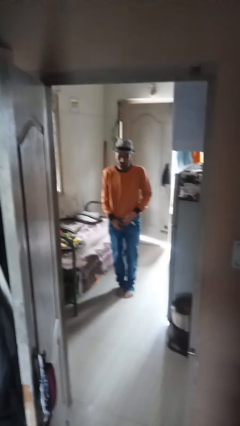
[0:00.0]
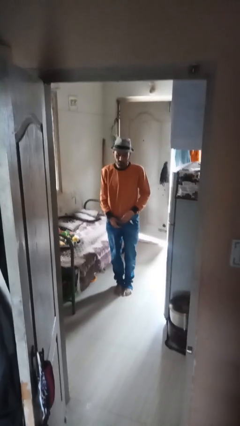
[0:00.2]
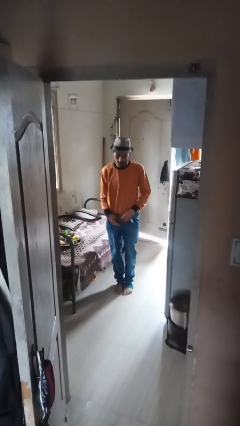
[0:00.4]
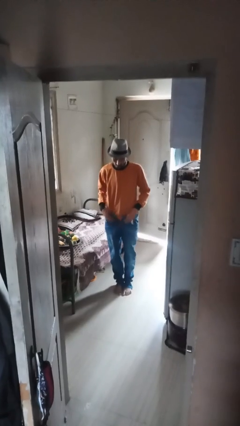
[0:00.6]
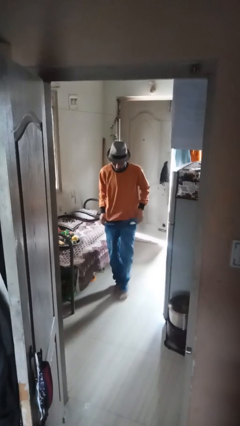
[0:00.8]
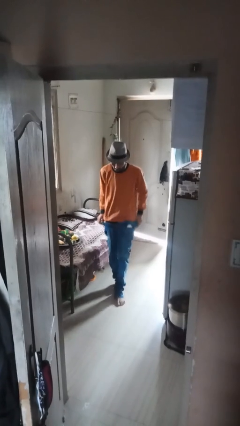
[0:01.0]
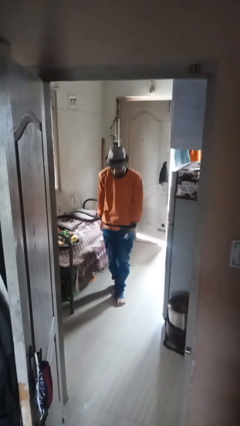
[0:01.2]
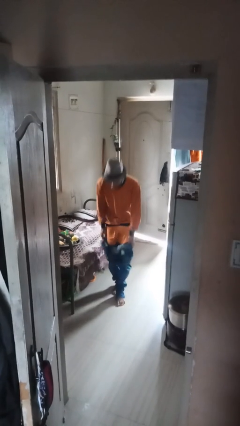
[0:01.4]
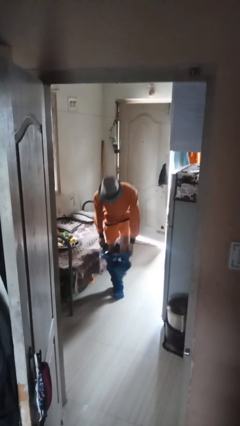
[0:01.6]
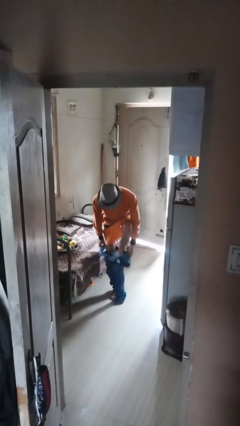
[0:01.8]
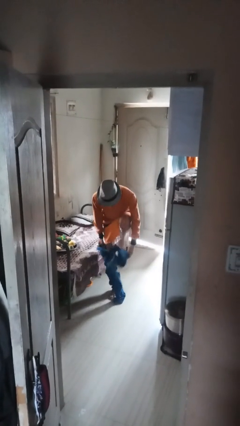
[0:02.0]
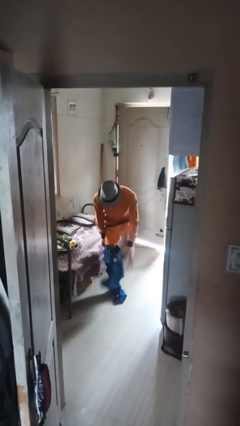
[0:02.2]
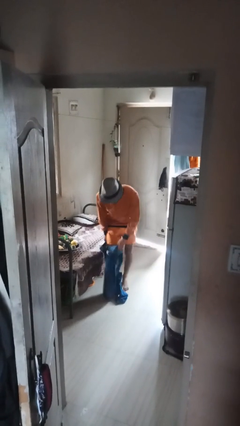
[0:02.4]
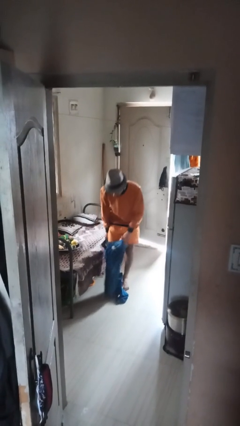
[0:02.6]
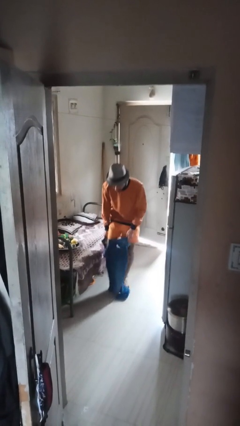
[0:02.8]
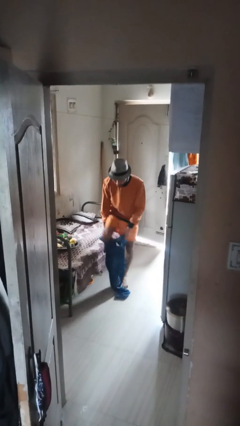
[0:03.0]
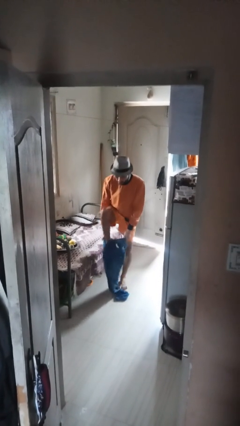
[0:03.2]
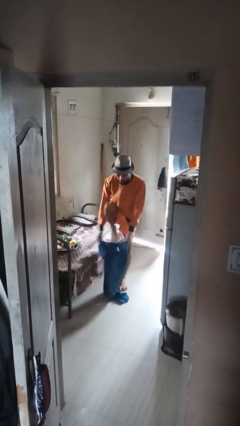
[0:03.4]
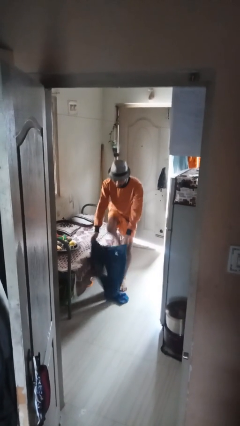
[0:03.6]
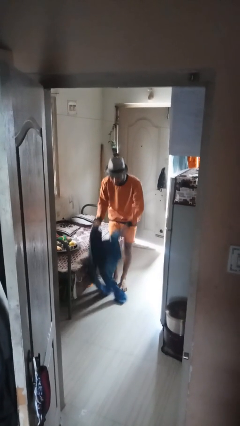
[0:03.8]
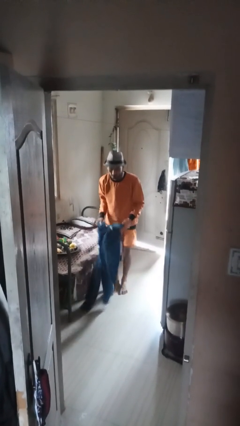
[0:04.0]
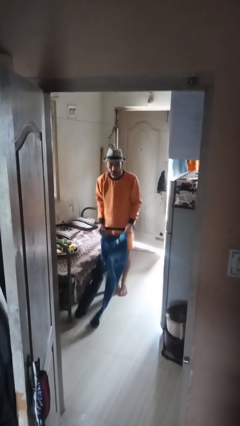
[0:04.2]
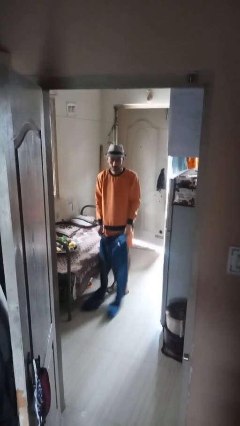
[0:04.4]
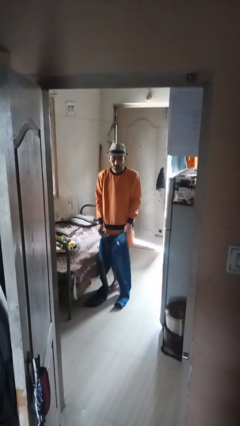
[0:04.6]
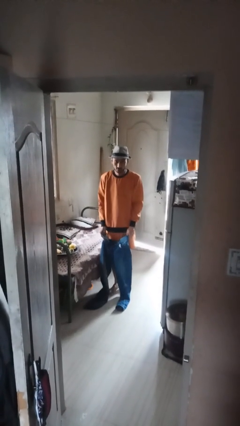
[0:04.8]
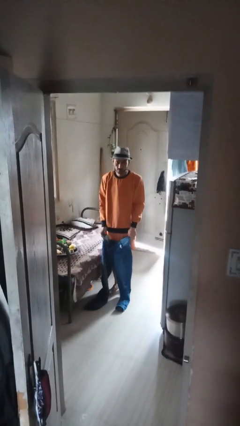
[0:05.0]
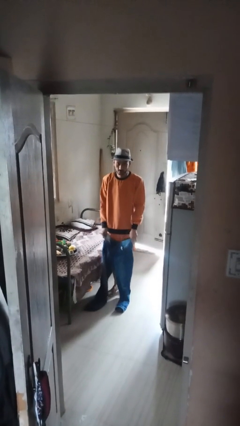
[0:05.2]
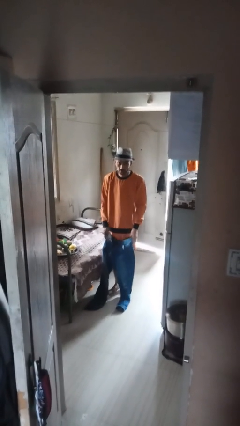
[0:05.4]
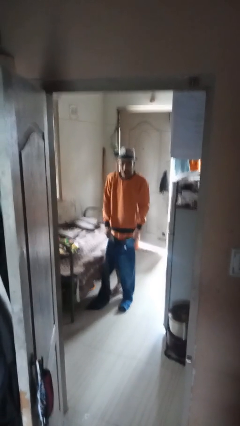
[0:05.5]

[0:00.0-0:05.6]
person takes off pants

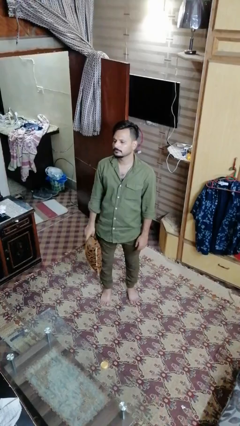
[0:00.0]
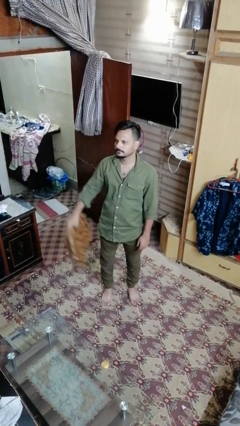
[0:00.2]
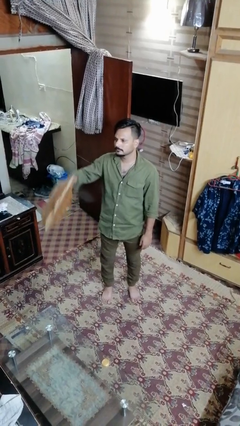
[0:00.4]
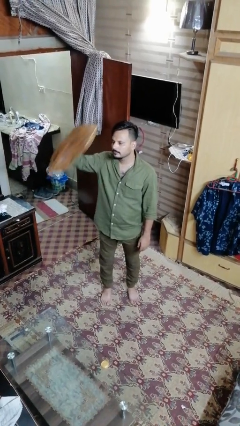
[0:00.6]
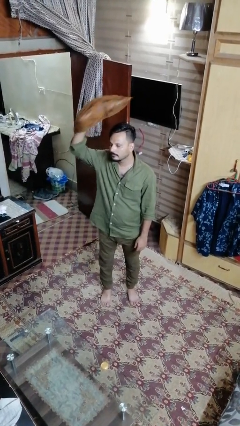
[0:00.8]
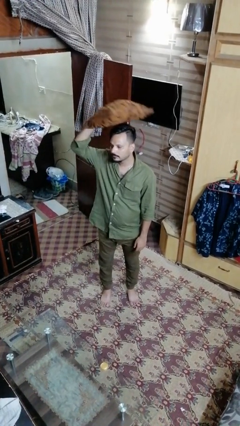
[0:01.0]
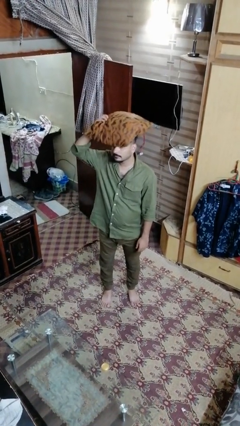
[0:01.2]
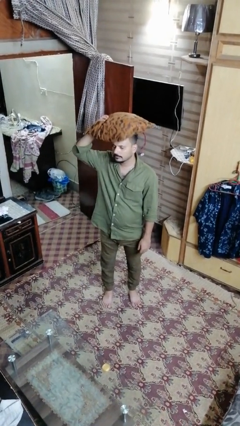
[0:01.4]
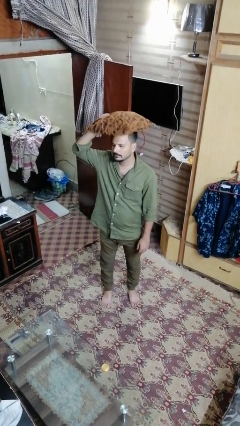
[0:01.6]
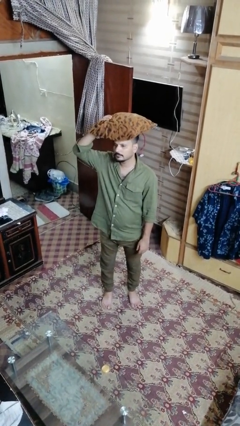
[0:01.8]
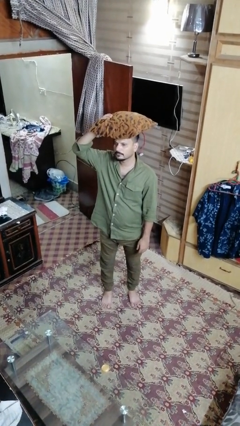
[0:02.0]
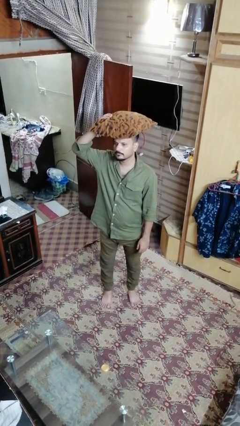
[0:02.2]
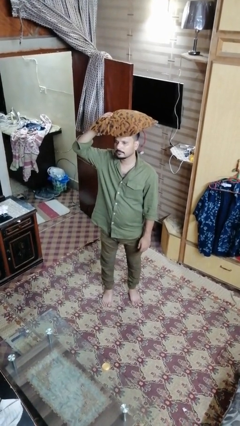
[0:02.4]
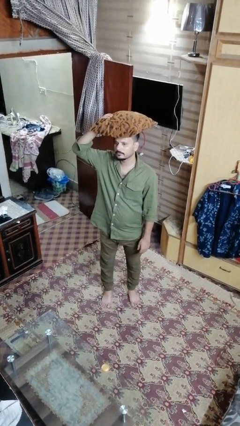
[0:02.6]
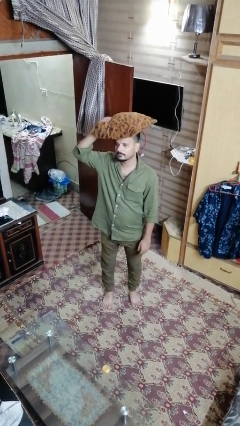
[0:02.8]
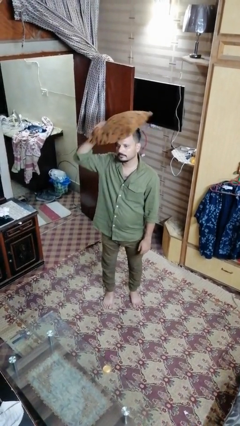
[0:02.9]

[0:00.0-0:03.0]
person holds object above head

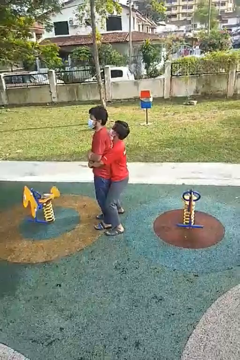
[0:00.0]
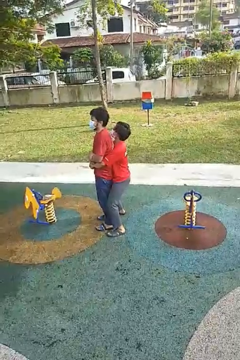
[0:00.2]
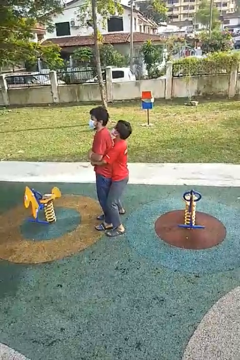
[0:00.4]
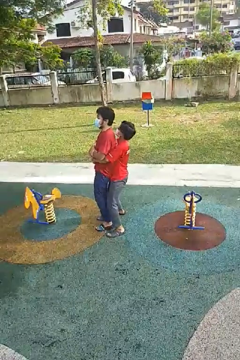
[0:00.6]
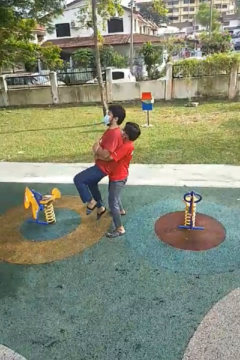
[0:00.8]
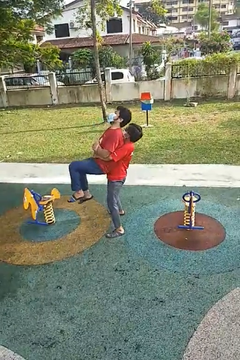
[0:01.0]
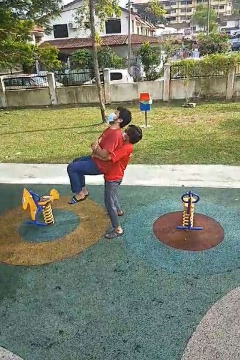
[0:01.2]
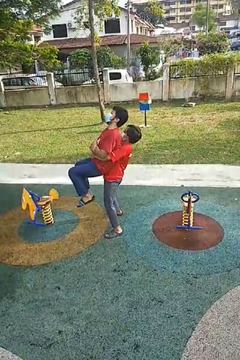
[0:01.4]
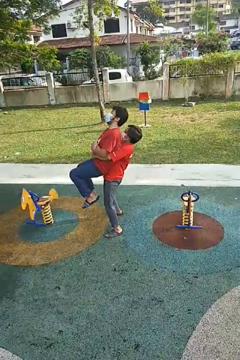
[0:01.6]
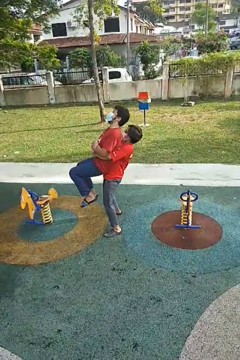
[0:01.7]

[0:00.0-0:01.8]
person picks up person

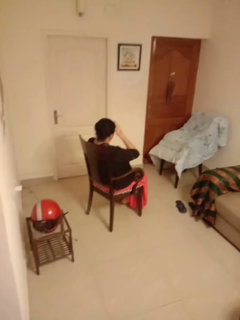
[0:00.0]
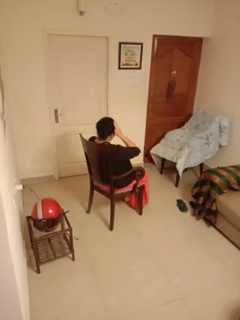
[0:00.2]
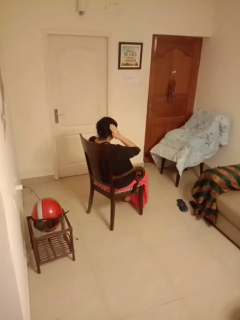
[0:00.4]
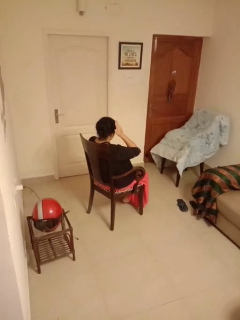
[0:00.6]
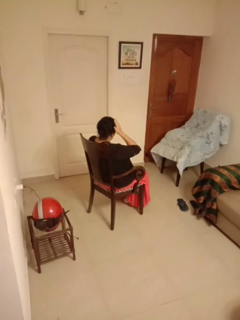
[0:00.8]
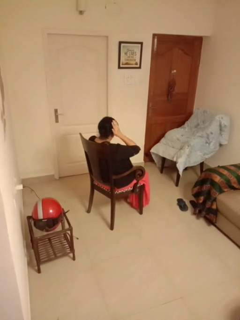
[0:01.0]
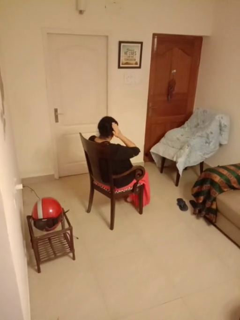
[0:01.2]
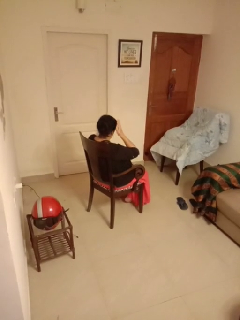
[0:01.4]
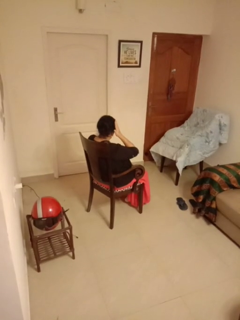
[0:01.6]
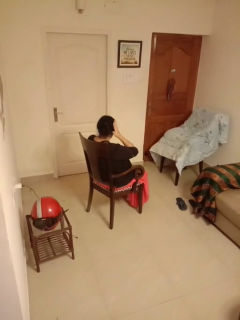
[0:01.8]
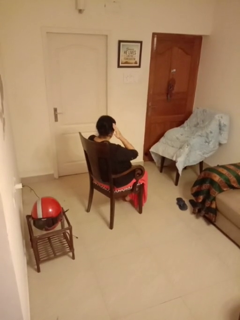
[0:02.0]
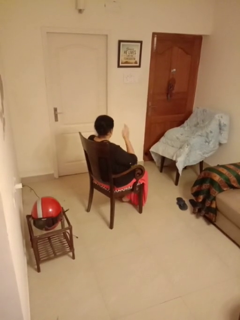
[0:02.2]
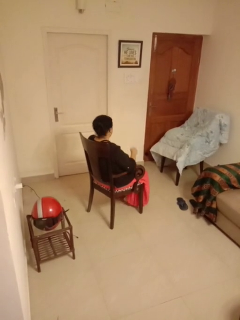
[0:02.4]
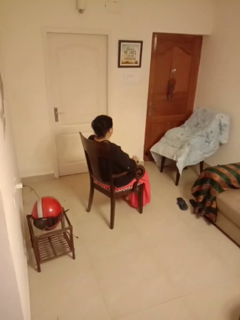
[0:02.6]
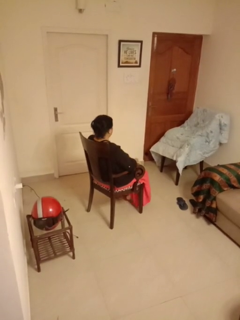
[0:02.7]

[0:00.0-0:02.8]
person strokes hair

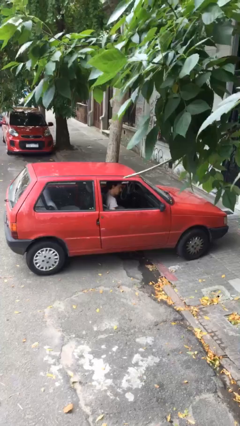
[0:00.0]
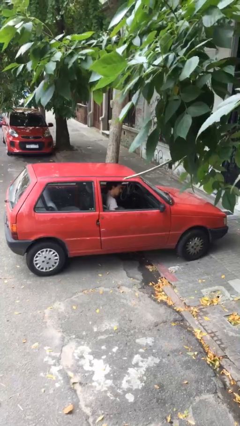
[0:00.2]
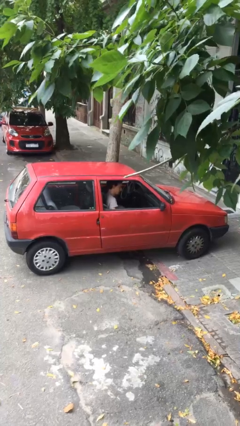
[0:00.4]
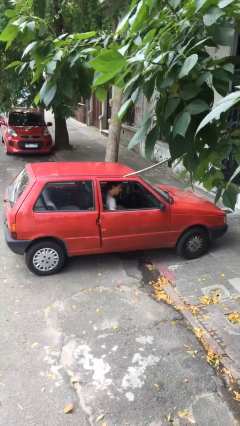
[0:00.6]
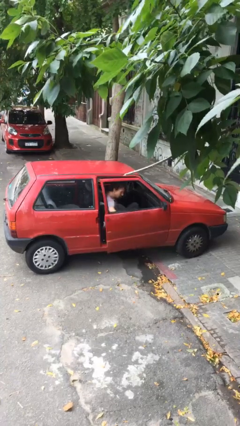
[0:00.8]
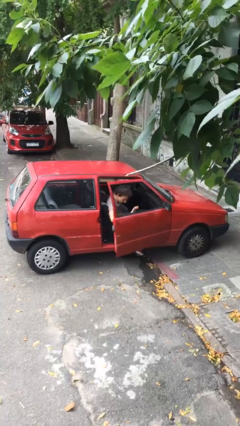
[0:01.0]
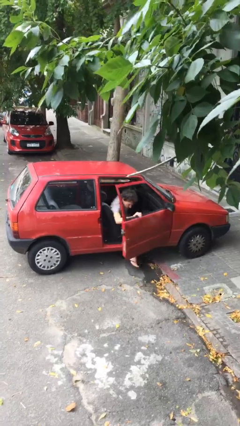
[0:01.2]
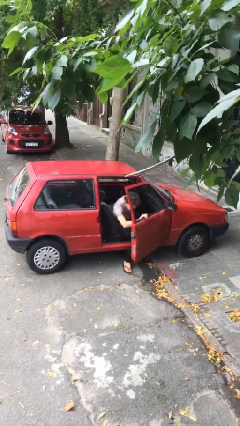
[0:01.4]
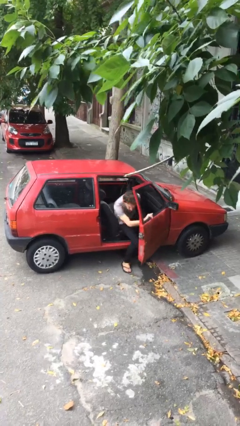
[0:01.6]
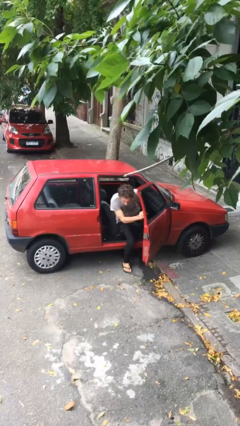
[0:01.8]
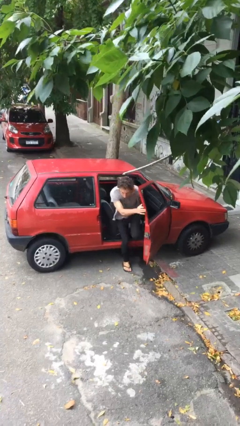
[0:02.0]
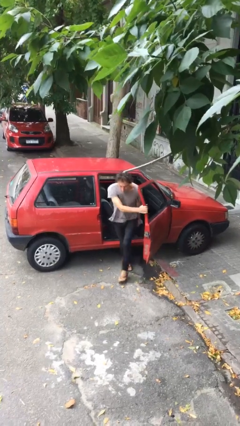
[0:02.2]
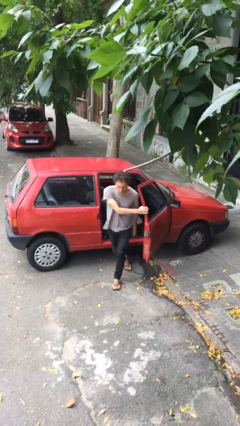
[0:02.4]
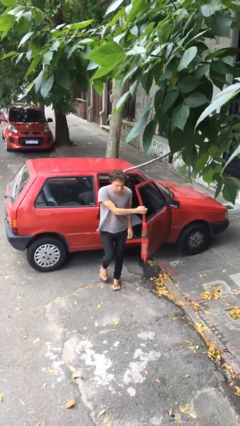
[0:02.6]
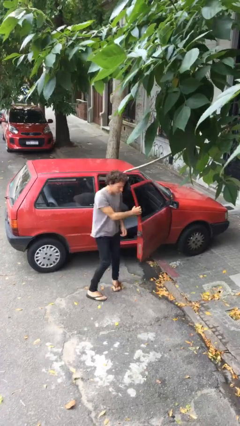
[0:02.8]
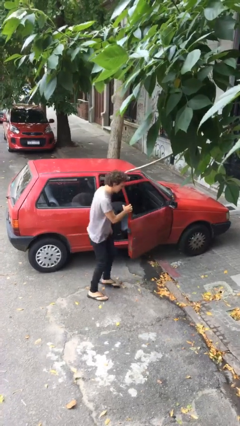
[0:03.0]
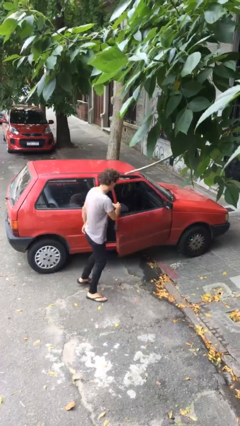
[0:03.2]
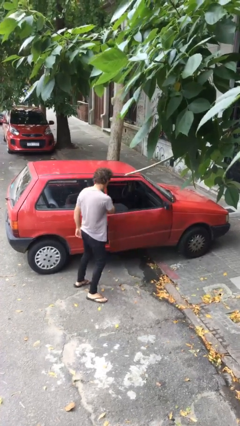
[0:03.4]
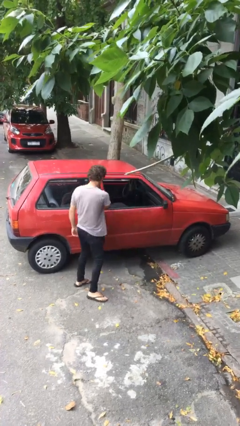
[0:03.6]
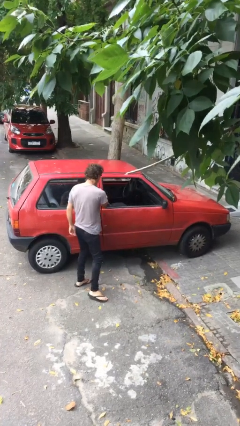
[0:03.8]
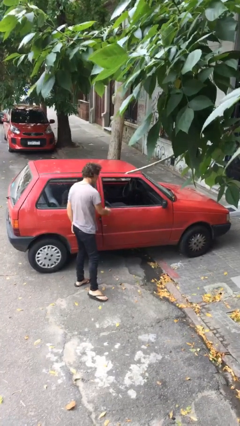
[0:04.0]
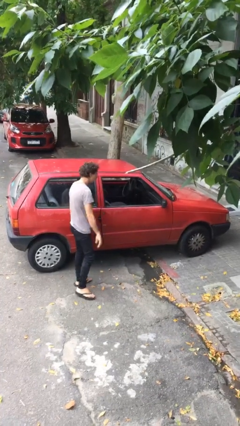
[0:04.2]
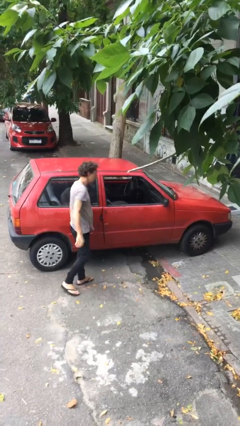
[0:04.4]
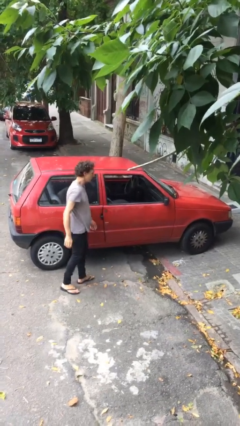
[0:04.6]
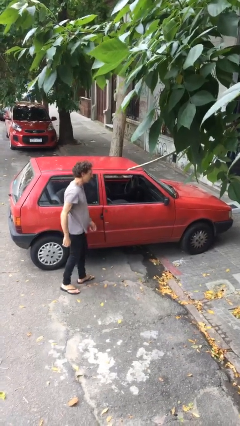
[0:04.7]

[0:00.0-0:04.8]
car drops off person

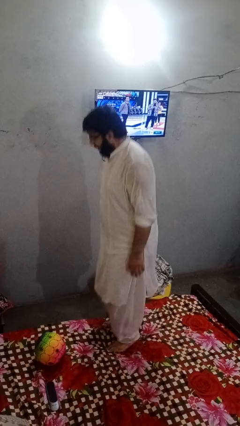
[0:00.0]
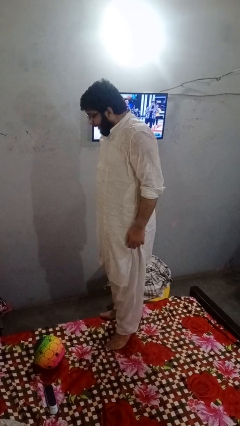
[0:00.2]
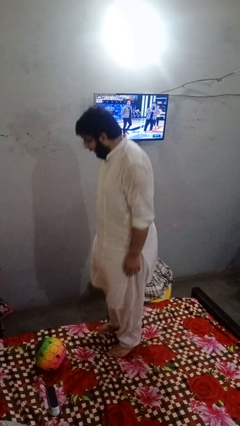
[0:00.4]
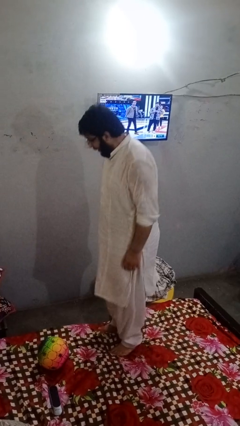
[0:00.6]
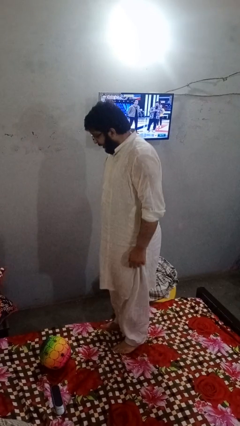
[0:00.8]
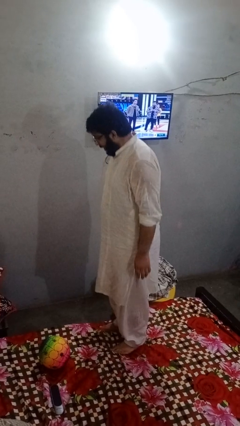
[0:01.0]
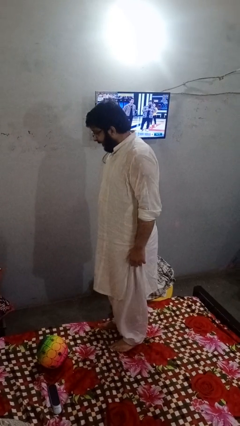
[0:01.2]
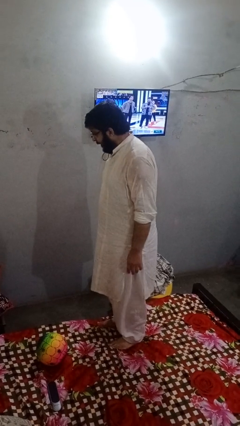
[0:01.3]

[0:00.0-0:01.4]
person jumps on bed
